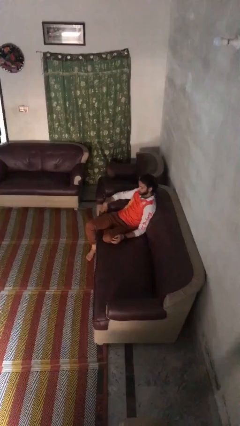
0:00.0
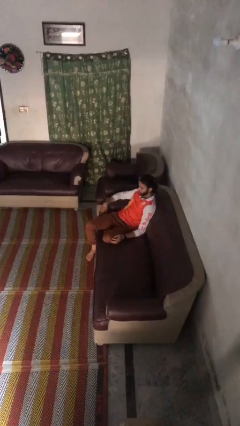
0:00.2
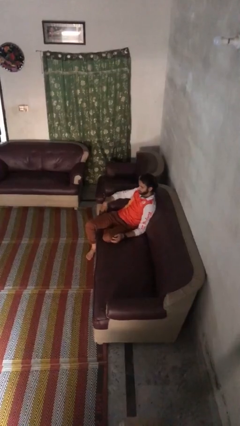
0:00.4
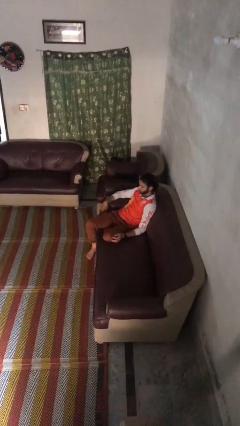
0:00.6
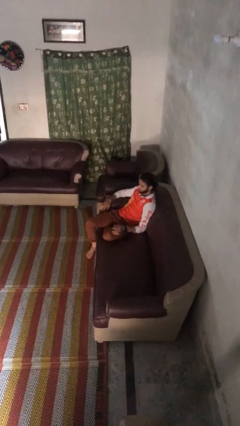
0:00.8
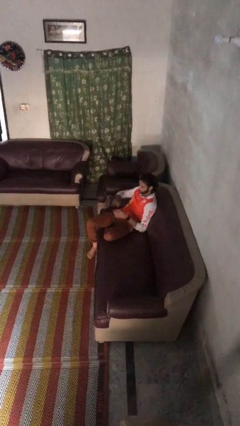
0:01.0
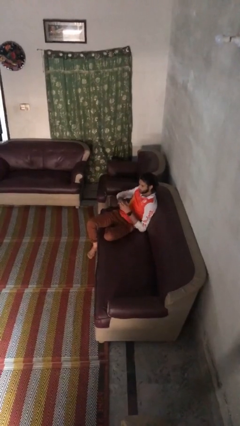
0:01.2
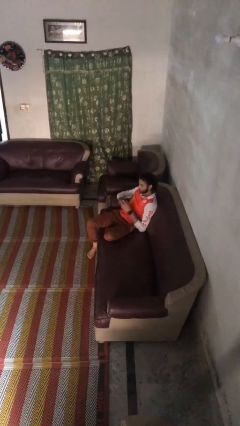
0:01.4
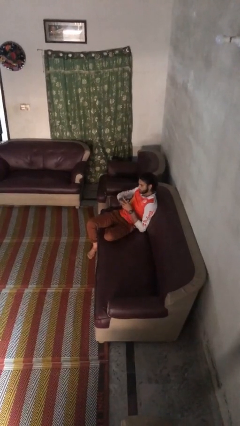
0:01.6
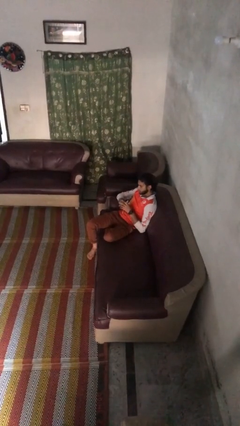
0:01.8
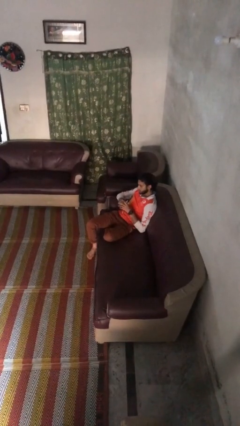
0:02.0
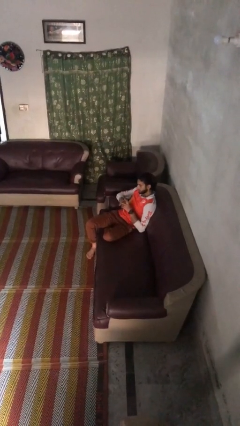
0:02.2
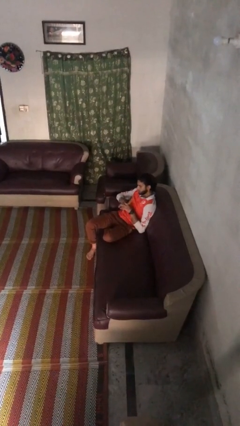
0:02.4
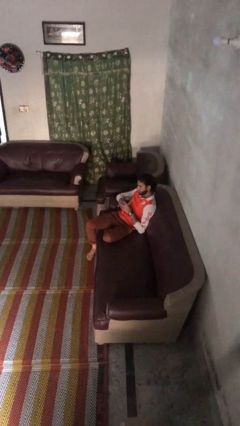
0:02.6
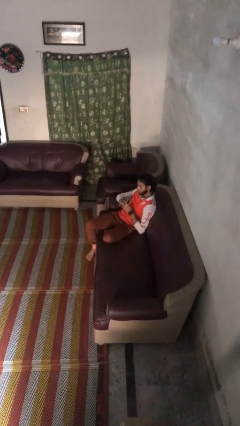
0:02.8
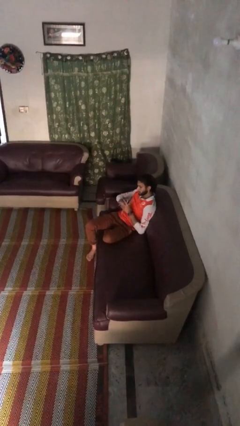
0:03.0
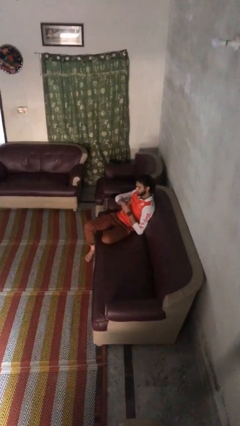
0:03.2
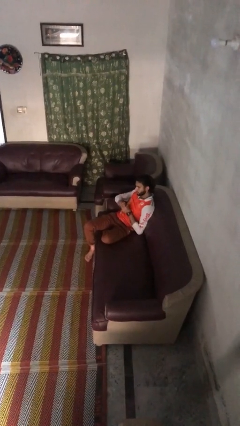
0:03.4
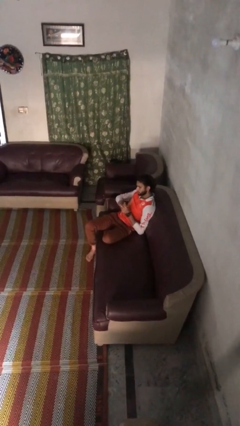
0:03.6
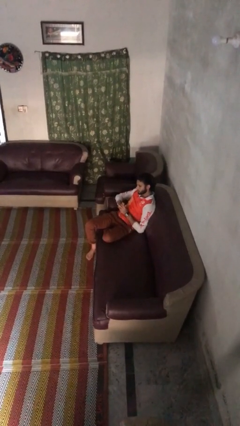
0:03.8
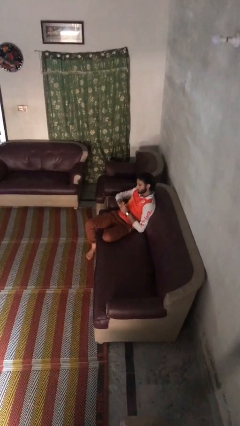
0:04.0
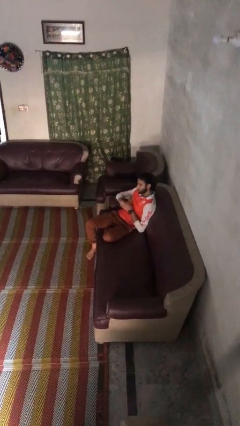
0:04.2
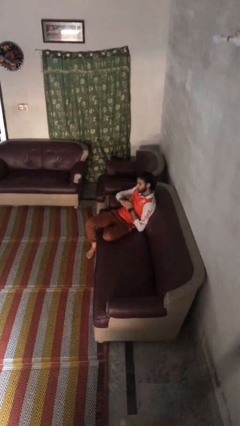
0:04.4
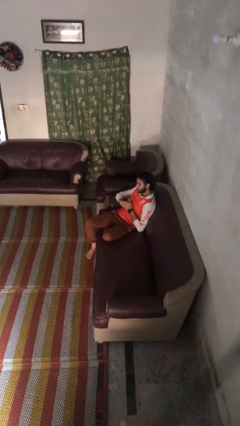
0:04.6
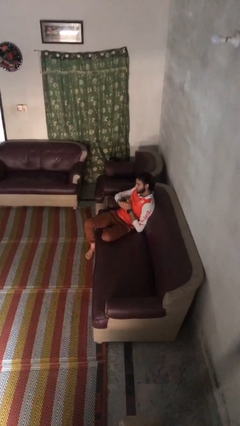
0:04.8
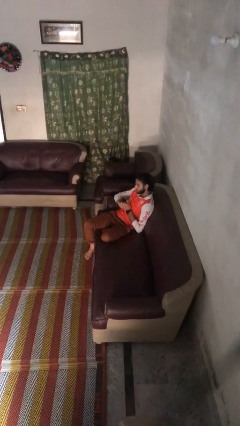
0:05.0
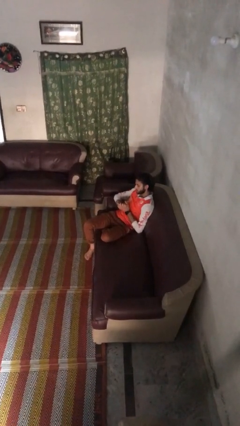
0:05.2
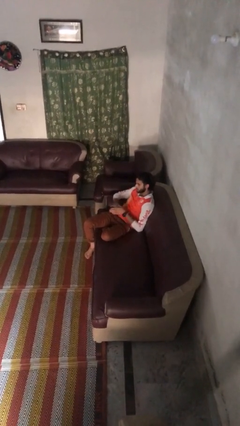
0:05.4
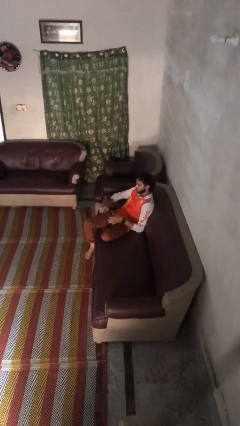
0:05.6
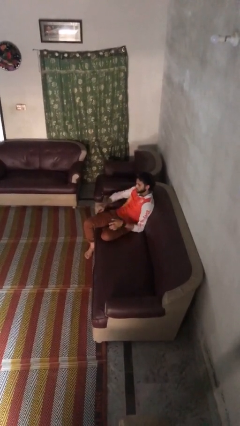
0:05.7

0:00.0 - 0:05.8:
person cracks knuckles

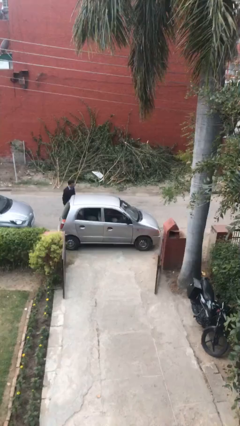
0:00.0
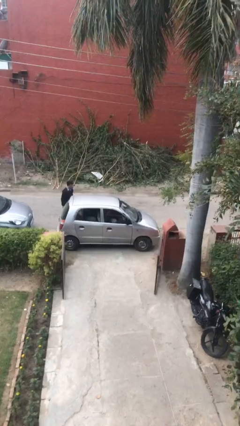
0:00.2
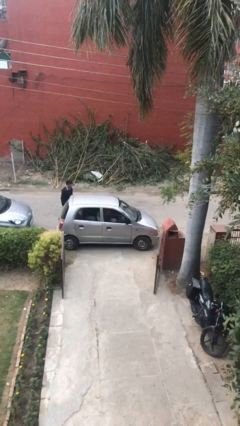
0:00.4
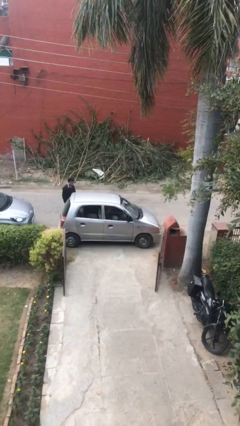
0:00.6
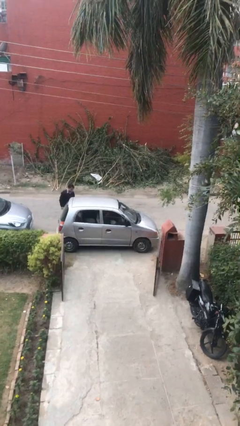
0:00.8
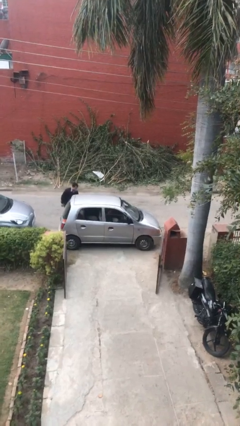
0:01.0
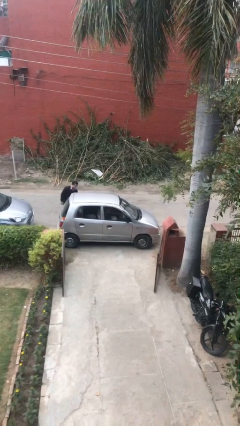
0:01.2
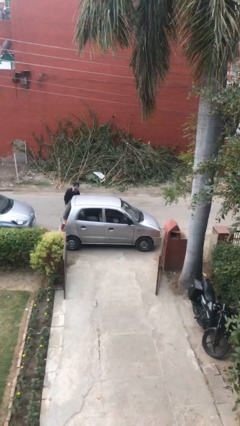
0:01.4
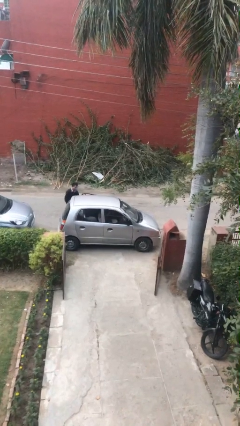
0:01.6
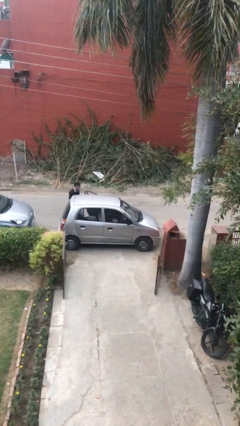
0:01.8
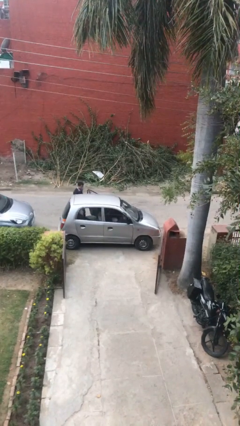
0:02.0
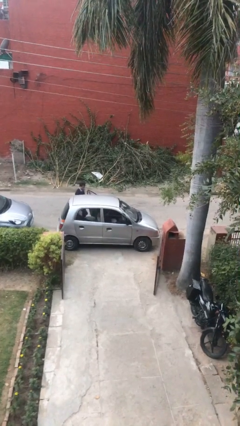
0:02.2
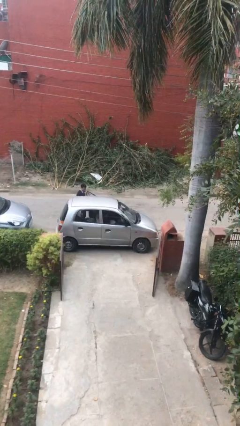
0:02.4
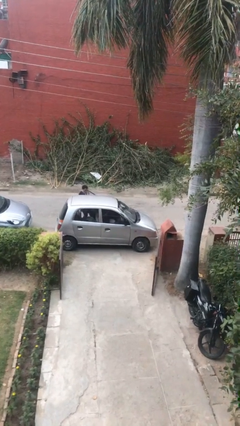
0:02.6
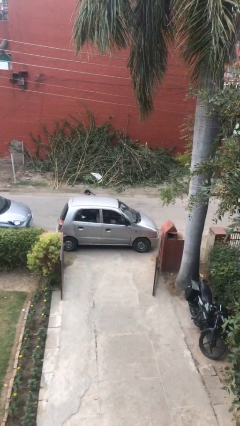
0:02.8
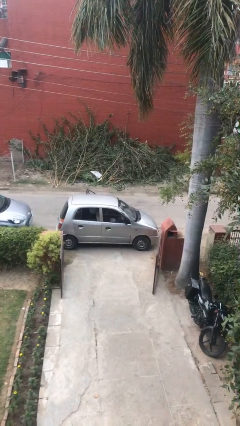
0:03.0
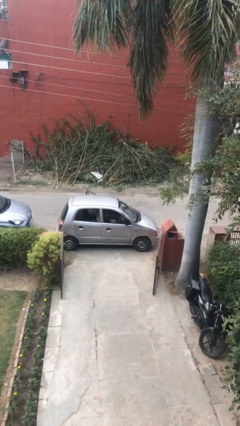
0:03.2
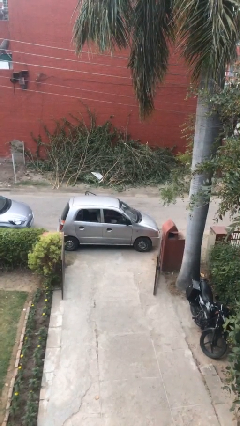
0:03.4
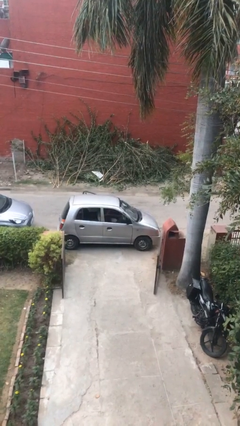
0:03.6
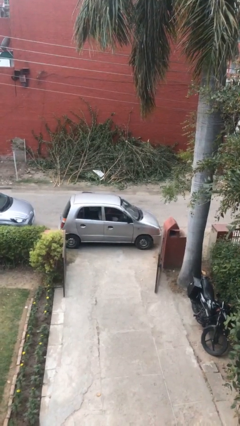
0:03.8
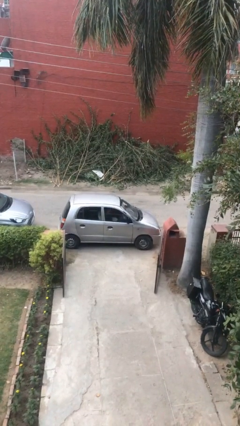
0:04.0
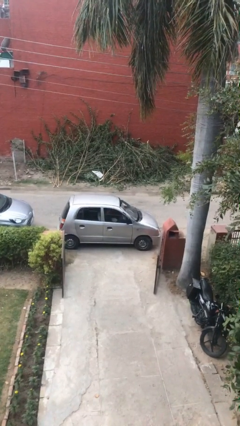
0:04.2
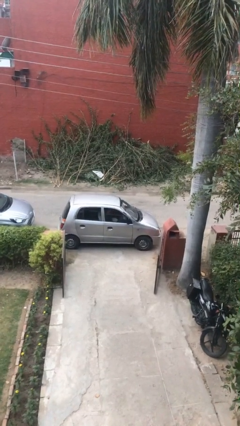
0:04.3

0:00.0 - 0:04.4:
car picks up person

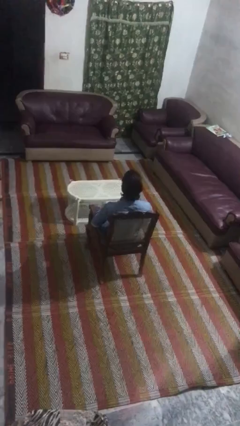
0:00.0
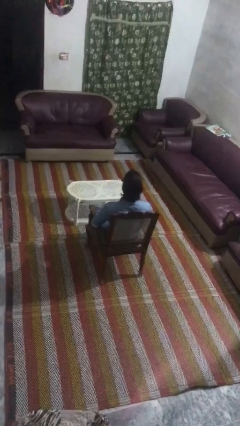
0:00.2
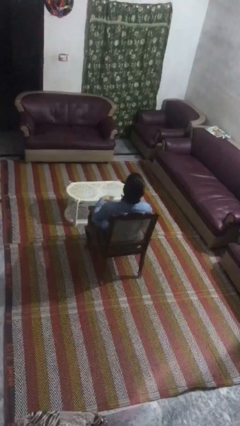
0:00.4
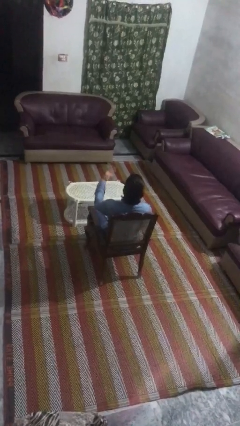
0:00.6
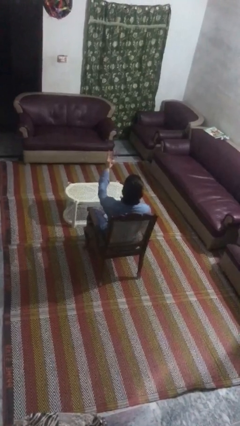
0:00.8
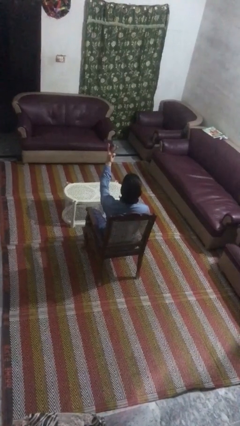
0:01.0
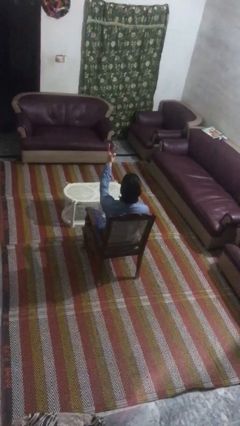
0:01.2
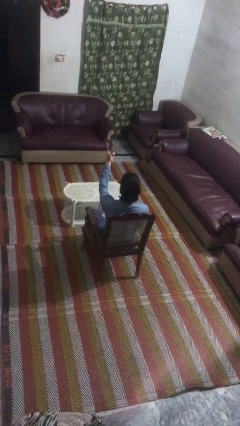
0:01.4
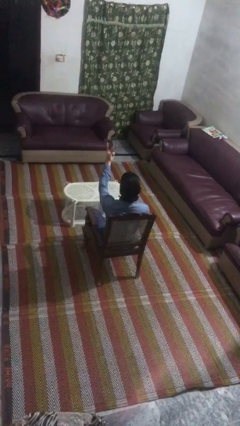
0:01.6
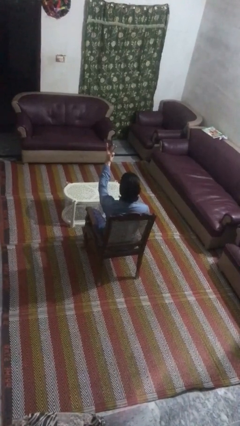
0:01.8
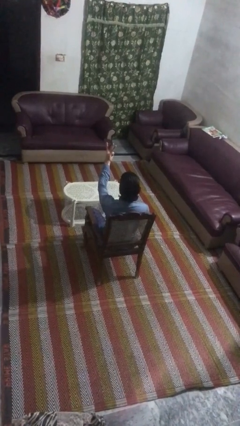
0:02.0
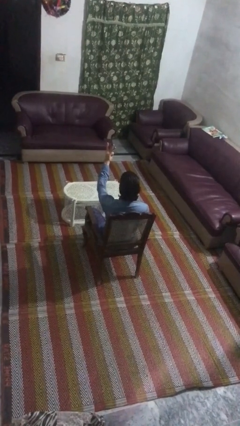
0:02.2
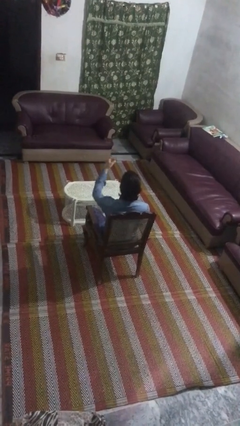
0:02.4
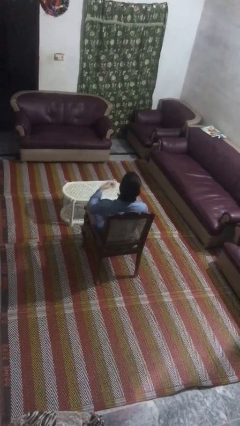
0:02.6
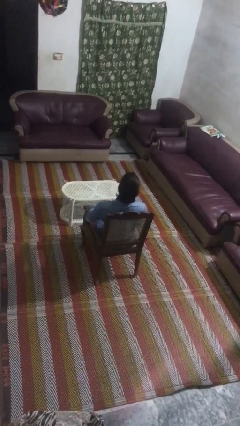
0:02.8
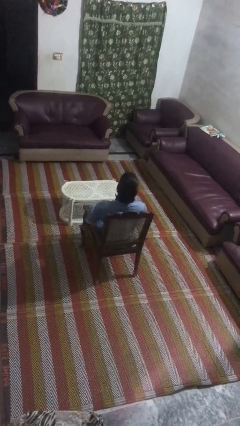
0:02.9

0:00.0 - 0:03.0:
person gestures number three

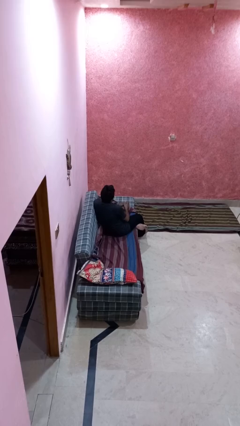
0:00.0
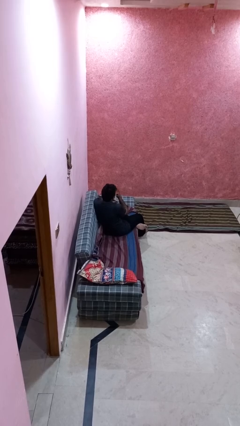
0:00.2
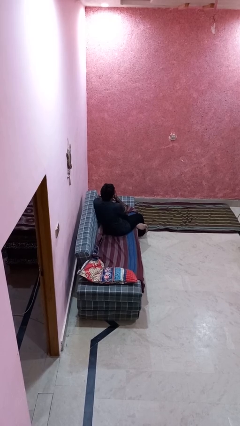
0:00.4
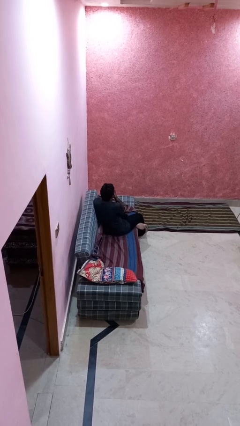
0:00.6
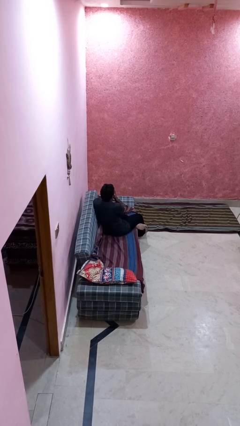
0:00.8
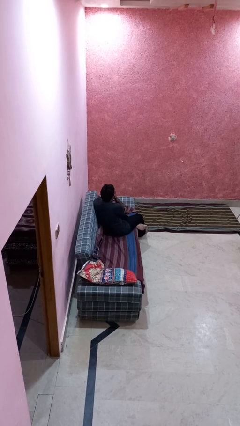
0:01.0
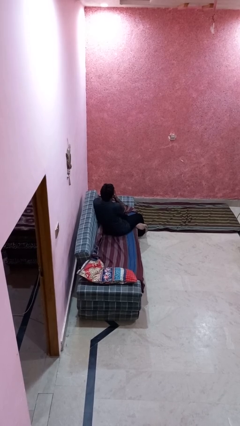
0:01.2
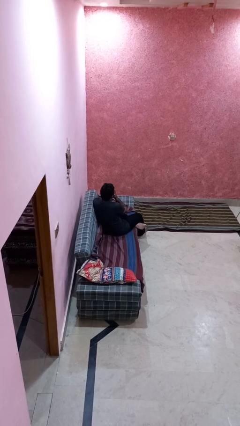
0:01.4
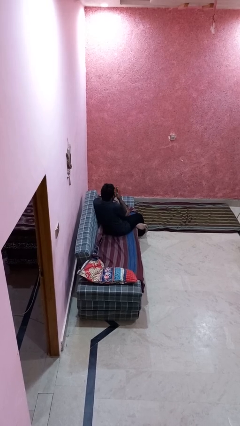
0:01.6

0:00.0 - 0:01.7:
person covers face with hands

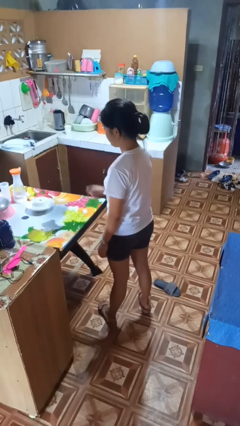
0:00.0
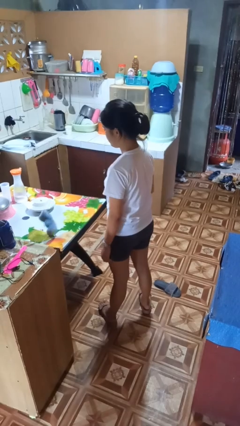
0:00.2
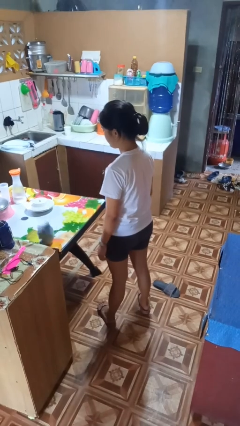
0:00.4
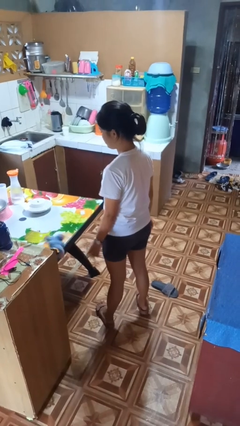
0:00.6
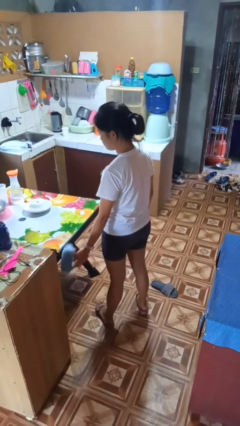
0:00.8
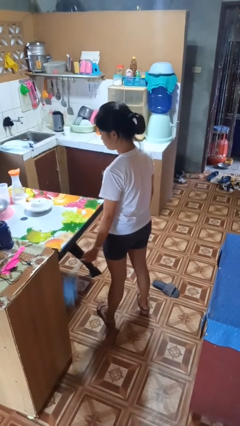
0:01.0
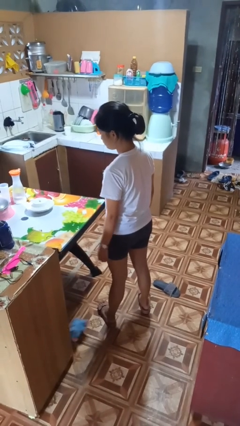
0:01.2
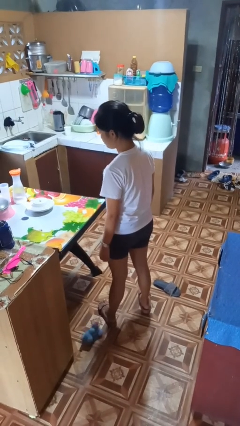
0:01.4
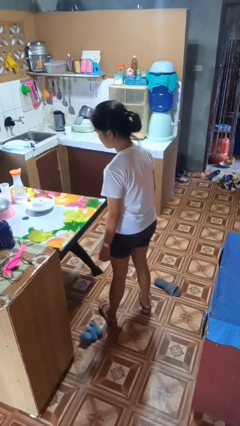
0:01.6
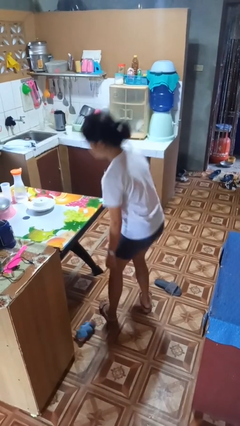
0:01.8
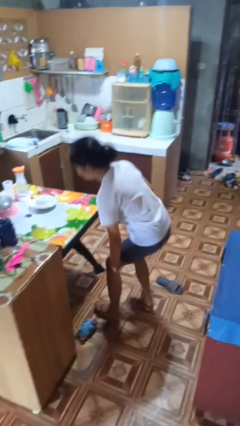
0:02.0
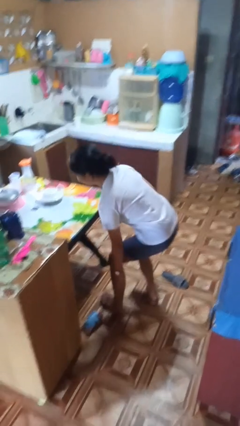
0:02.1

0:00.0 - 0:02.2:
person throws object on table

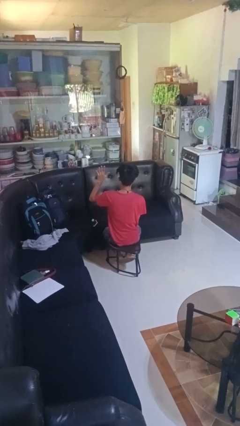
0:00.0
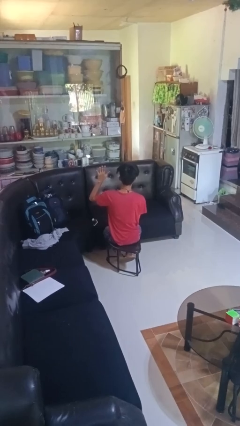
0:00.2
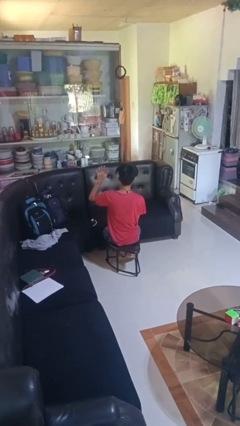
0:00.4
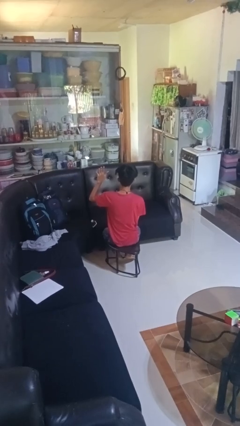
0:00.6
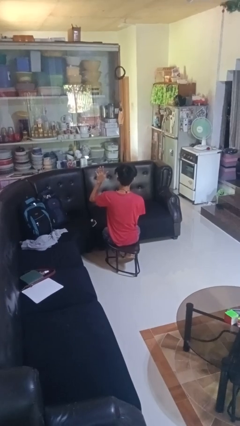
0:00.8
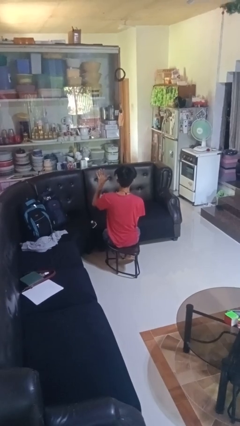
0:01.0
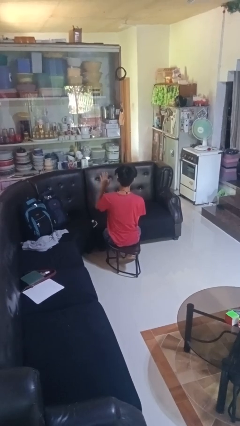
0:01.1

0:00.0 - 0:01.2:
person gestures number five
